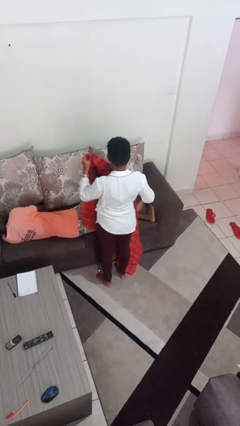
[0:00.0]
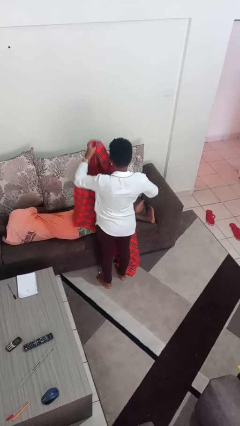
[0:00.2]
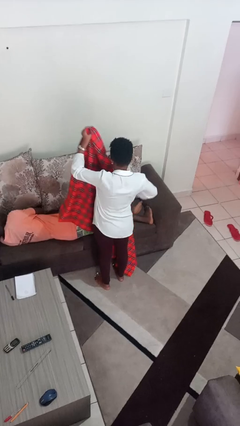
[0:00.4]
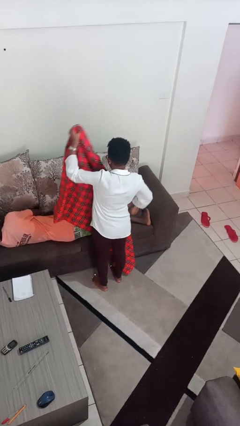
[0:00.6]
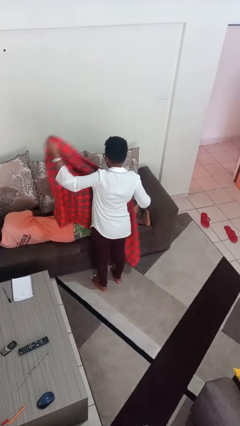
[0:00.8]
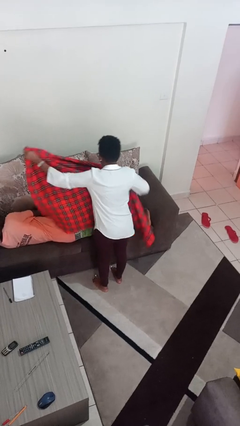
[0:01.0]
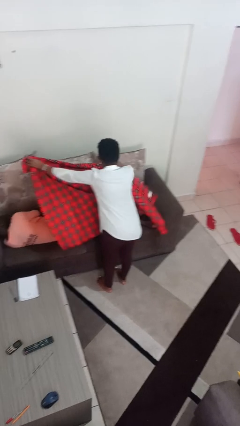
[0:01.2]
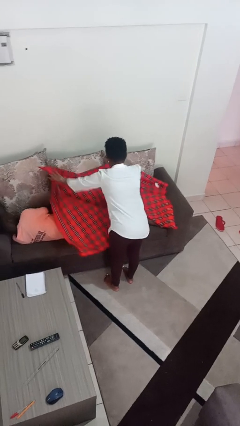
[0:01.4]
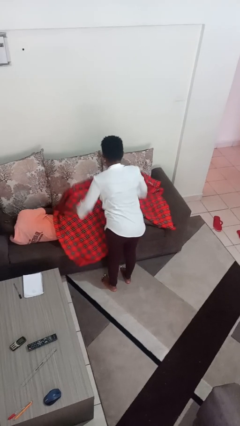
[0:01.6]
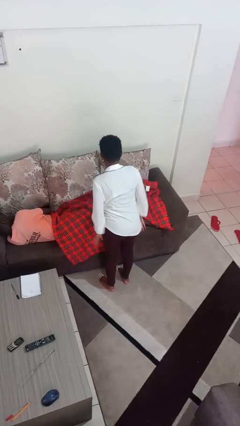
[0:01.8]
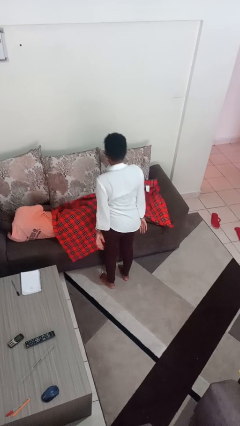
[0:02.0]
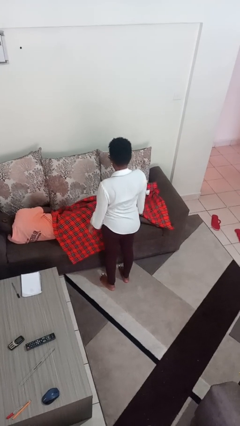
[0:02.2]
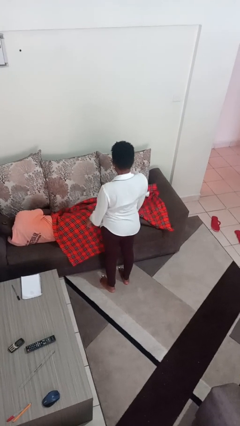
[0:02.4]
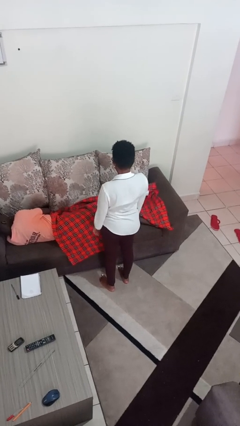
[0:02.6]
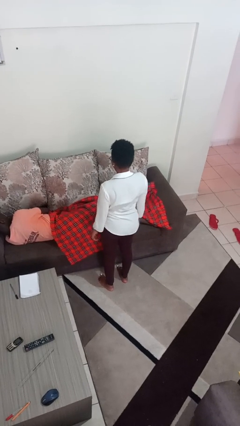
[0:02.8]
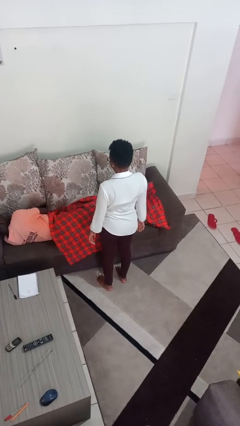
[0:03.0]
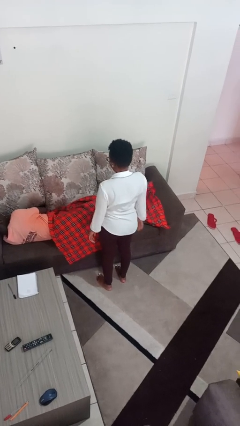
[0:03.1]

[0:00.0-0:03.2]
person covers friend with blanket

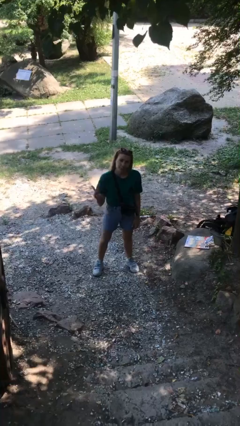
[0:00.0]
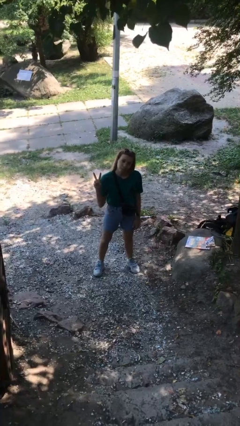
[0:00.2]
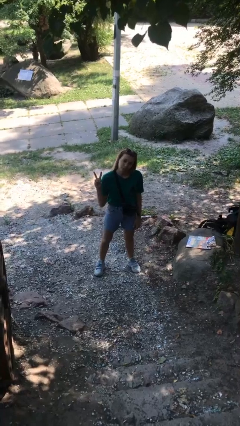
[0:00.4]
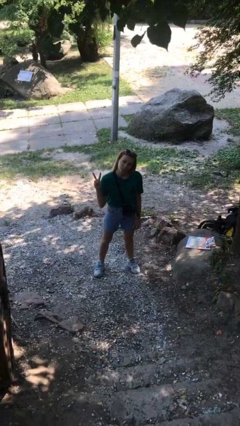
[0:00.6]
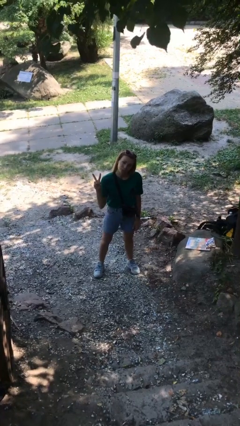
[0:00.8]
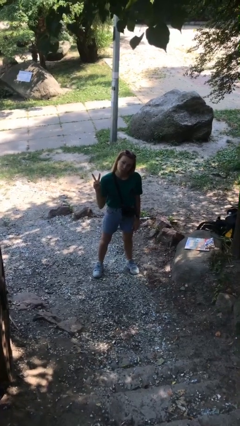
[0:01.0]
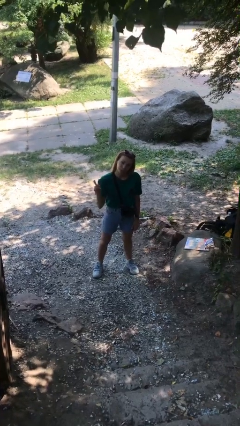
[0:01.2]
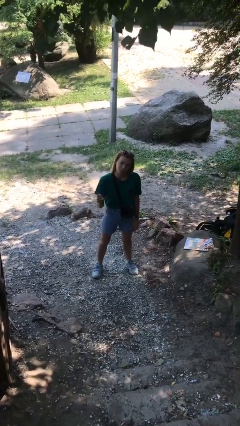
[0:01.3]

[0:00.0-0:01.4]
person gestures peace

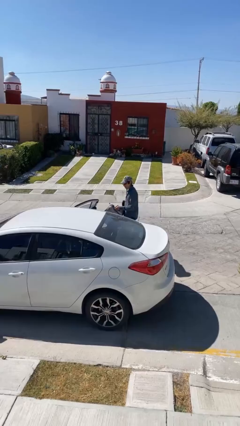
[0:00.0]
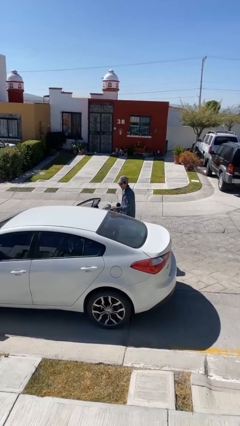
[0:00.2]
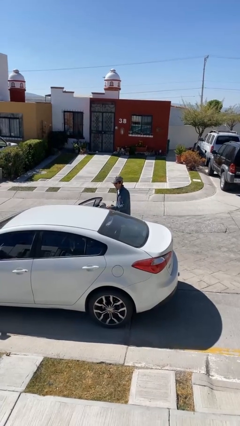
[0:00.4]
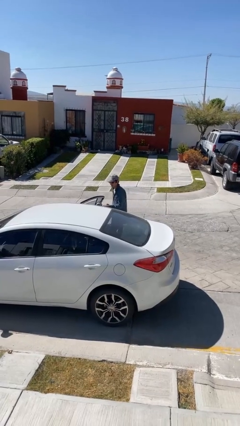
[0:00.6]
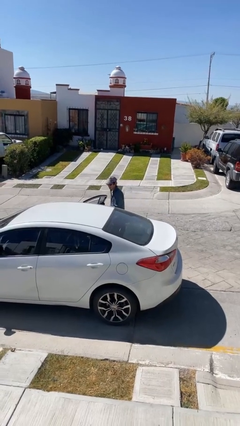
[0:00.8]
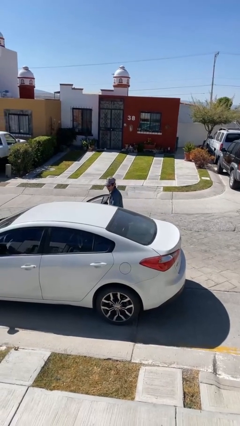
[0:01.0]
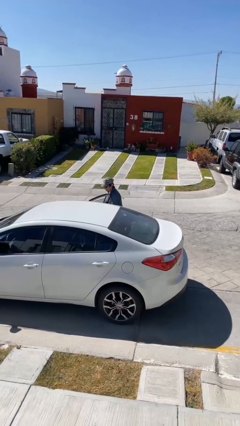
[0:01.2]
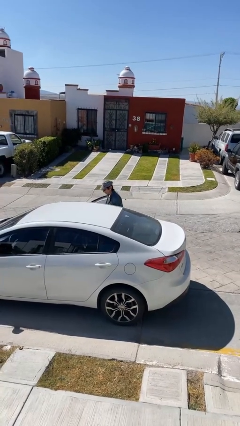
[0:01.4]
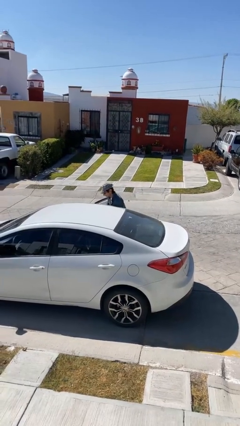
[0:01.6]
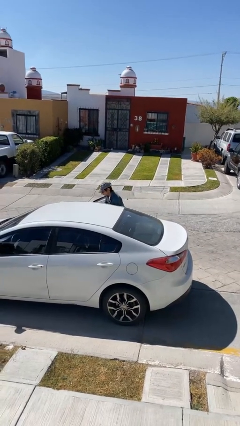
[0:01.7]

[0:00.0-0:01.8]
person loads car

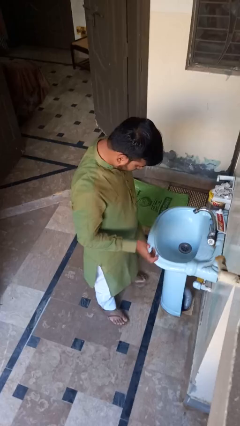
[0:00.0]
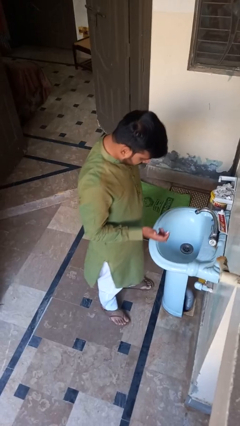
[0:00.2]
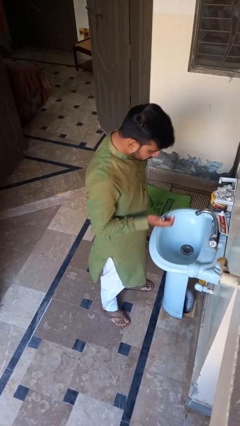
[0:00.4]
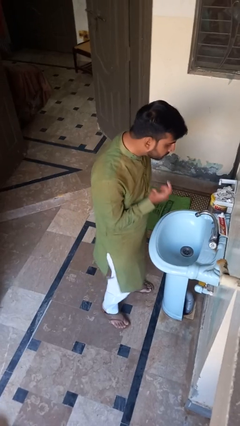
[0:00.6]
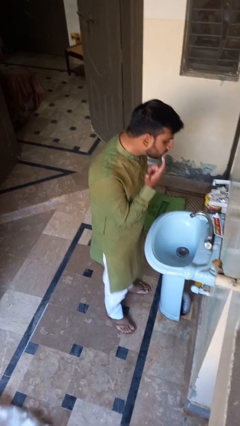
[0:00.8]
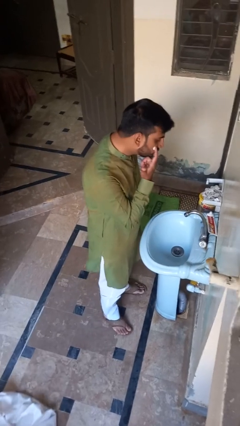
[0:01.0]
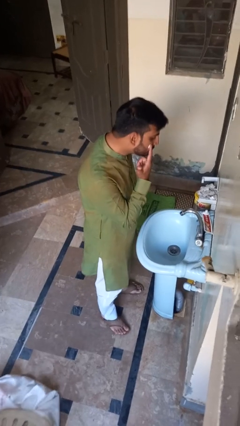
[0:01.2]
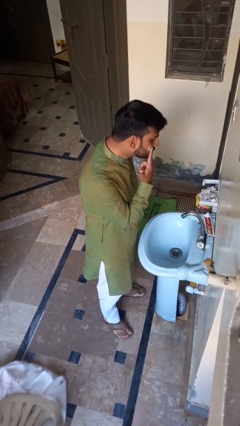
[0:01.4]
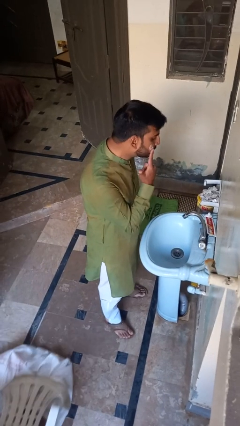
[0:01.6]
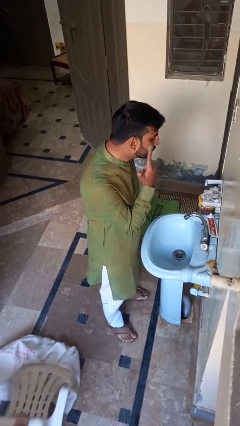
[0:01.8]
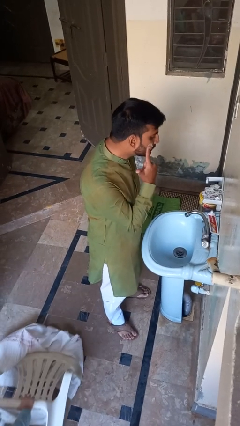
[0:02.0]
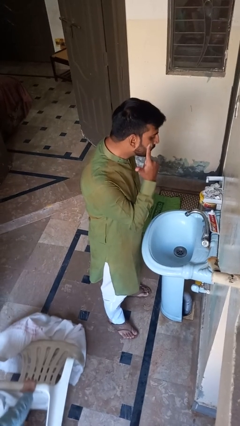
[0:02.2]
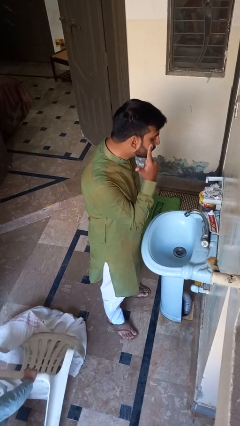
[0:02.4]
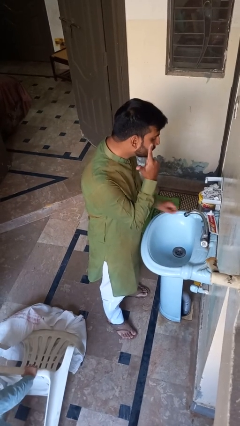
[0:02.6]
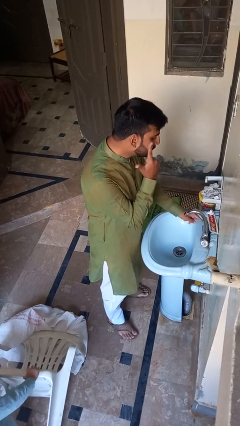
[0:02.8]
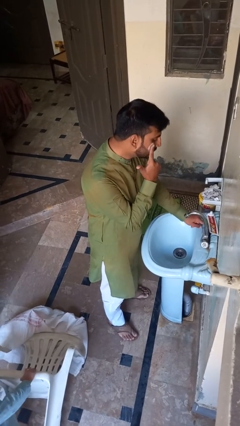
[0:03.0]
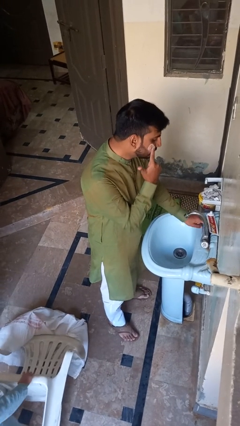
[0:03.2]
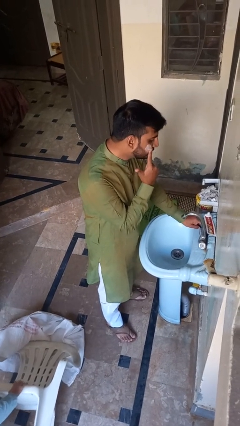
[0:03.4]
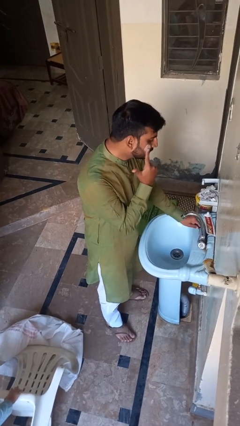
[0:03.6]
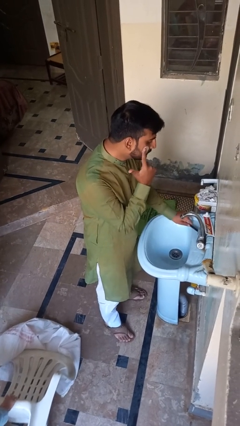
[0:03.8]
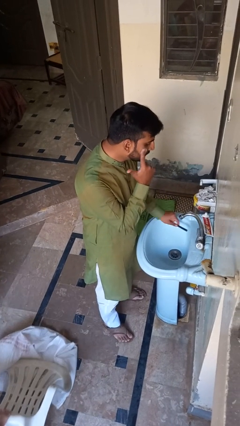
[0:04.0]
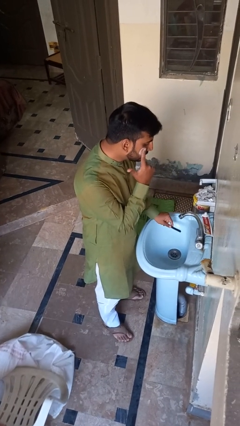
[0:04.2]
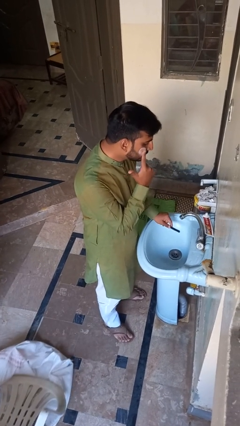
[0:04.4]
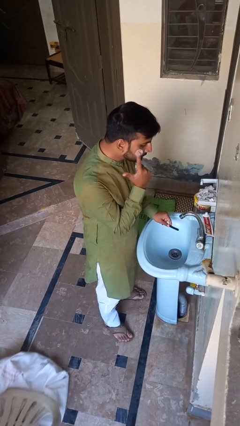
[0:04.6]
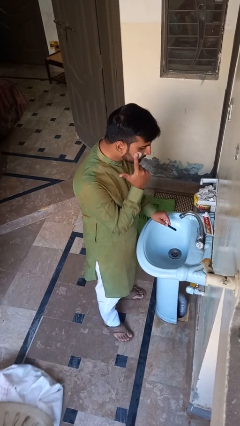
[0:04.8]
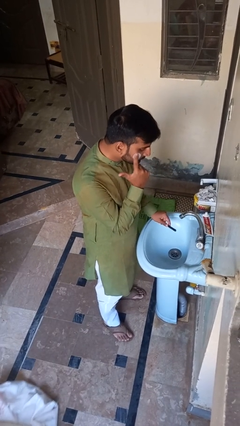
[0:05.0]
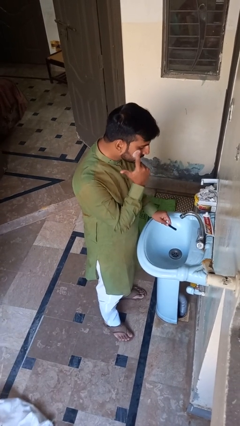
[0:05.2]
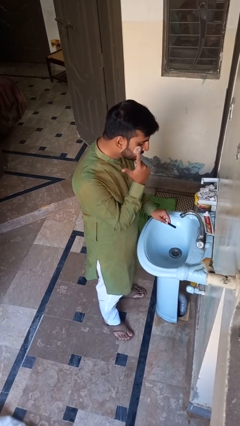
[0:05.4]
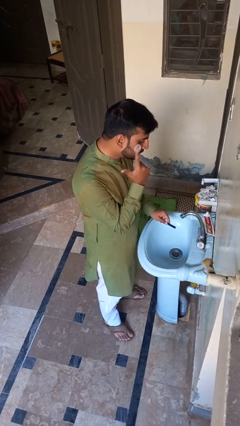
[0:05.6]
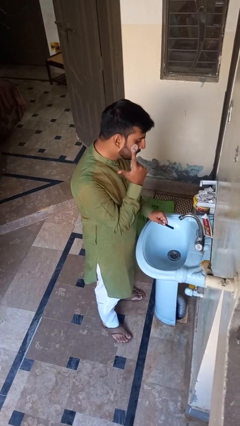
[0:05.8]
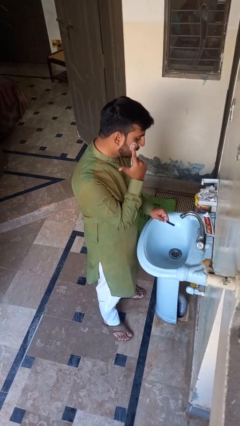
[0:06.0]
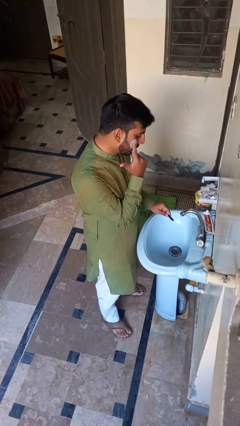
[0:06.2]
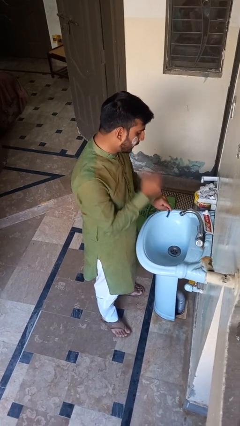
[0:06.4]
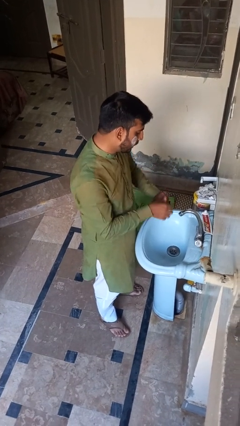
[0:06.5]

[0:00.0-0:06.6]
person applies shaving cream

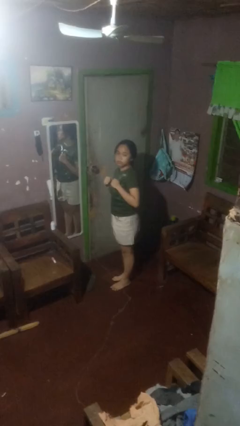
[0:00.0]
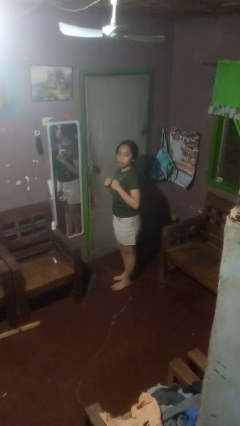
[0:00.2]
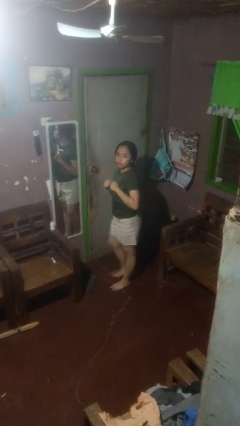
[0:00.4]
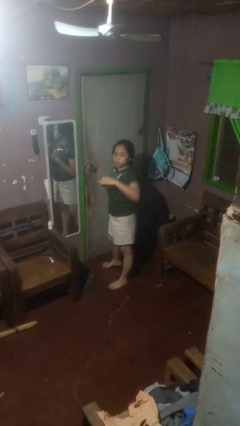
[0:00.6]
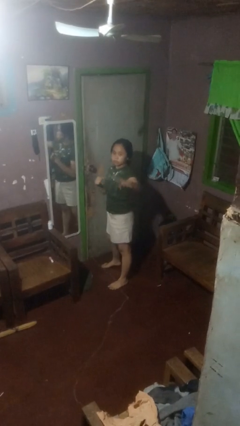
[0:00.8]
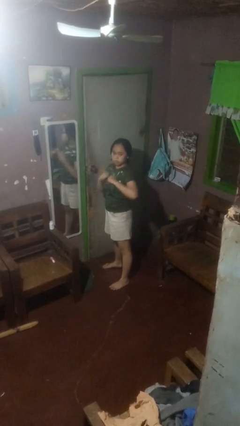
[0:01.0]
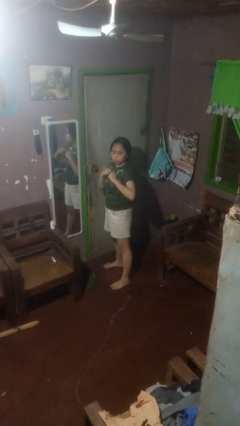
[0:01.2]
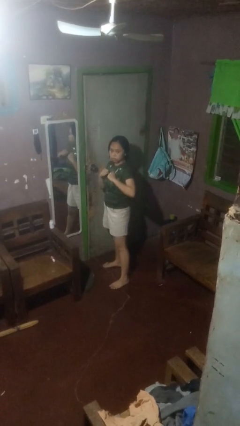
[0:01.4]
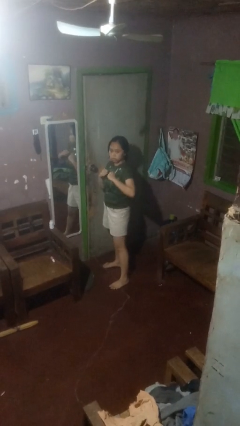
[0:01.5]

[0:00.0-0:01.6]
person karate chop

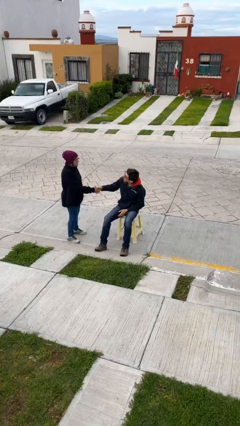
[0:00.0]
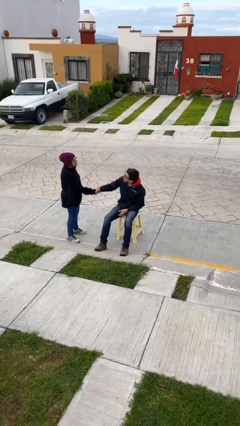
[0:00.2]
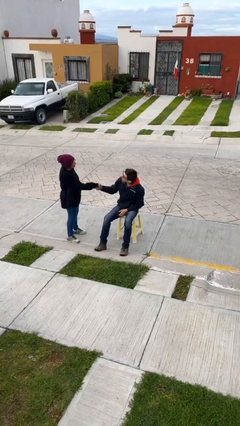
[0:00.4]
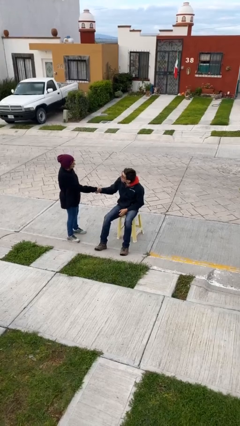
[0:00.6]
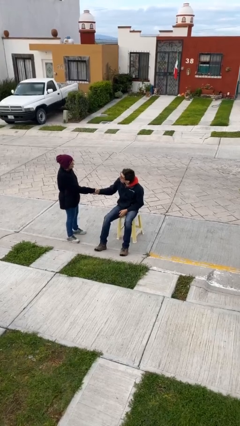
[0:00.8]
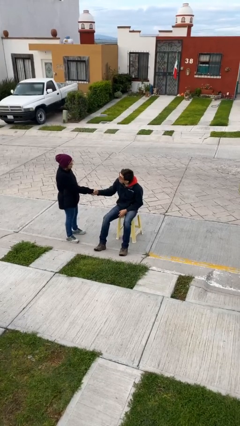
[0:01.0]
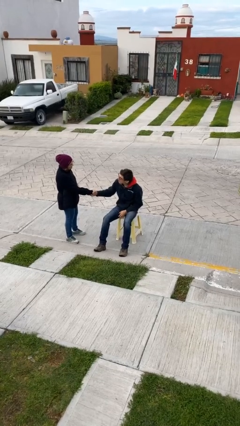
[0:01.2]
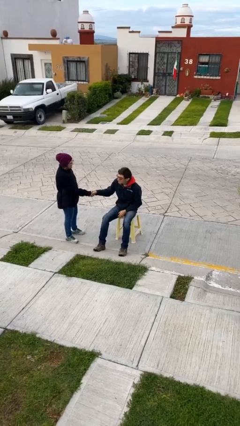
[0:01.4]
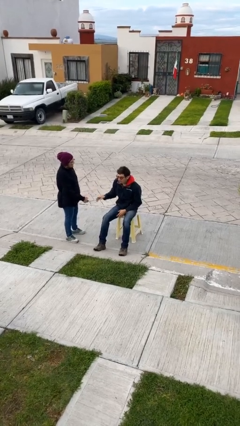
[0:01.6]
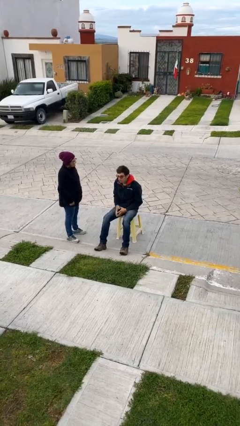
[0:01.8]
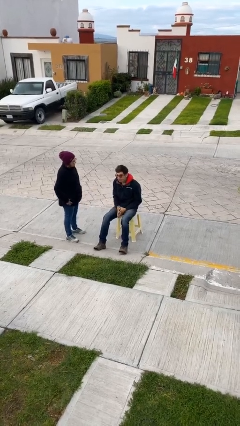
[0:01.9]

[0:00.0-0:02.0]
person shakes hand

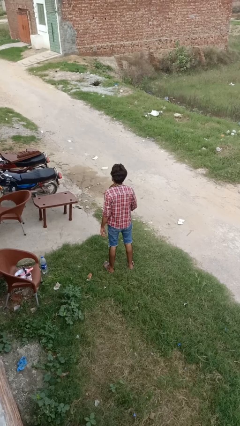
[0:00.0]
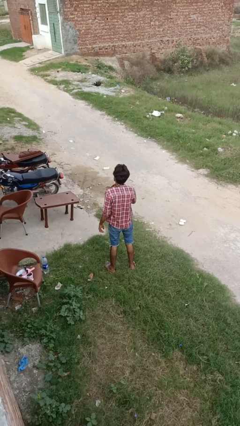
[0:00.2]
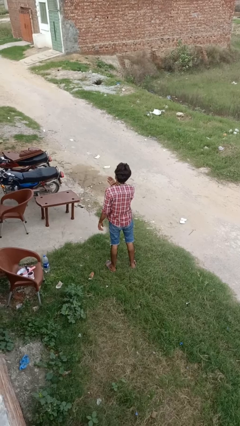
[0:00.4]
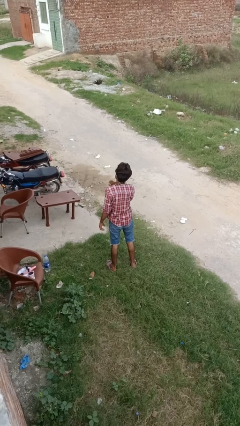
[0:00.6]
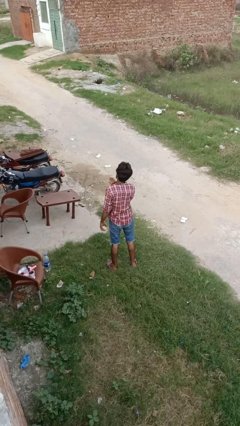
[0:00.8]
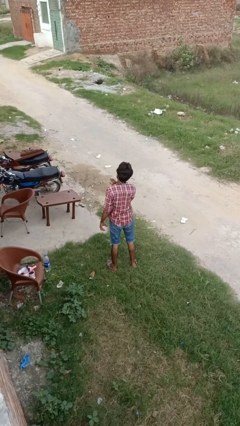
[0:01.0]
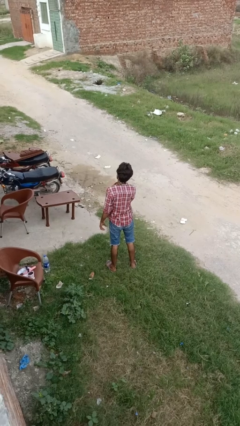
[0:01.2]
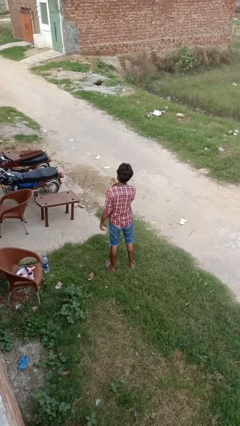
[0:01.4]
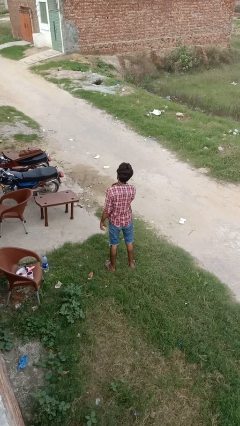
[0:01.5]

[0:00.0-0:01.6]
person drums on chest
